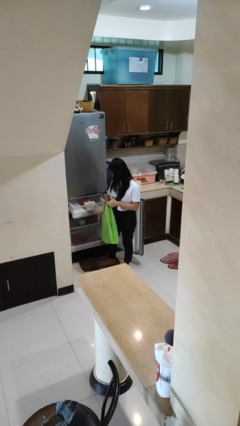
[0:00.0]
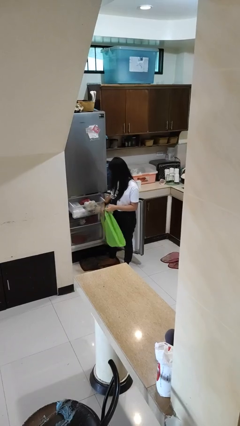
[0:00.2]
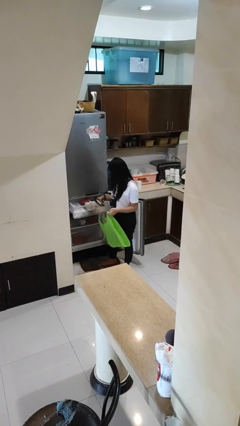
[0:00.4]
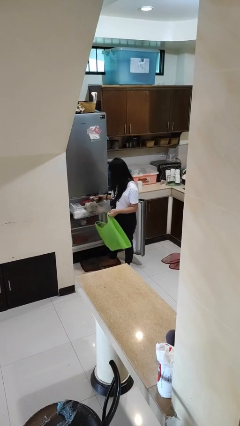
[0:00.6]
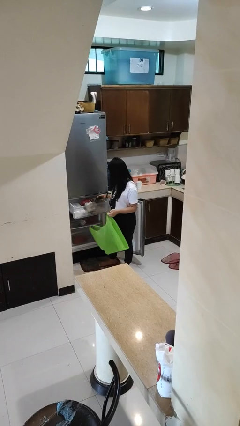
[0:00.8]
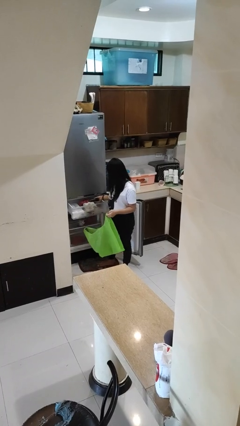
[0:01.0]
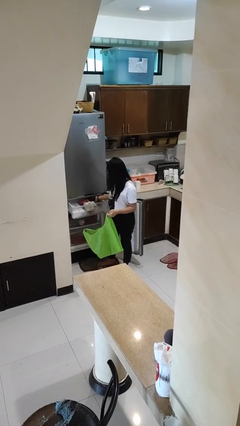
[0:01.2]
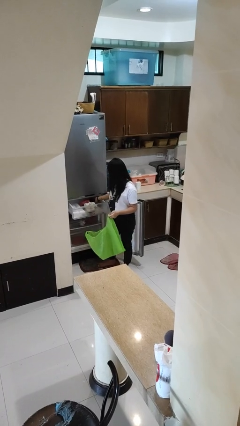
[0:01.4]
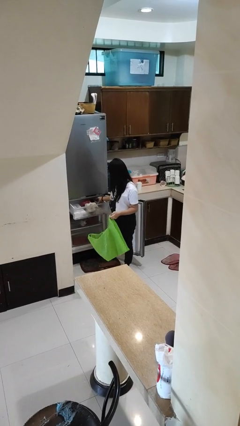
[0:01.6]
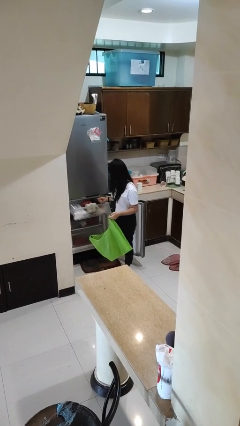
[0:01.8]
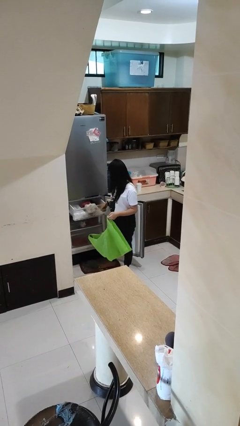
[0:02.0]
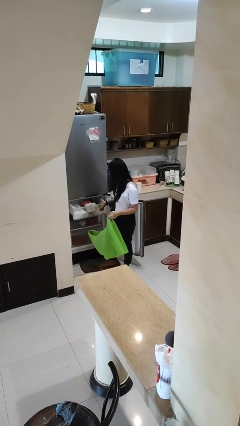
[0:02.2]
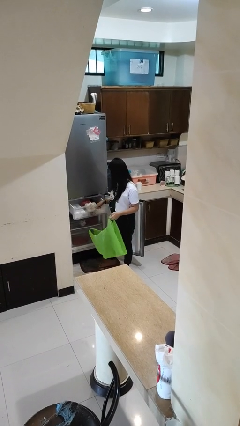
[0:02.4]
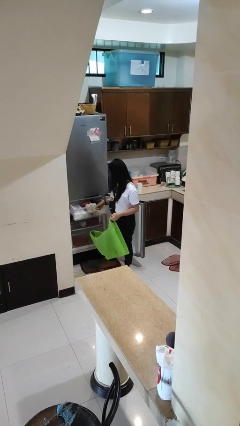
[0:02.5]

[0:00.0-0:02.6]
person loads groceries into refrigerator

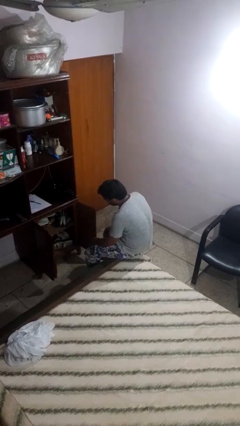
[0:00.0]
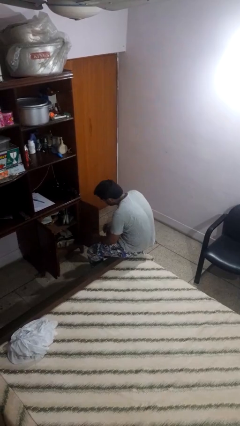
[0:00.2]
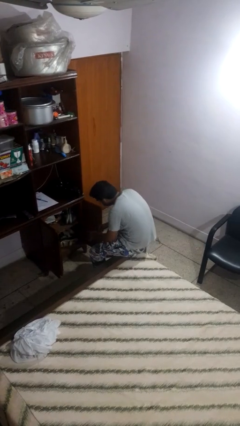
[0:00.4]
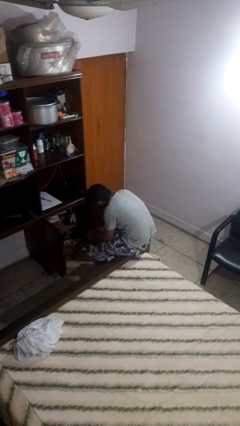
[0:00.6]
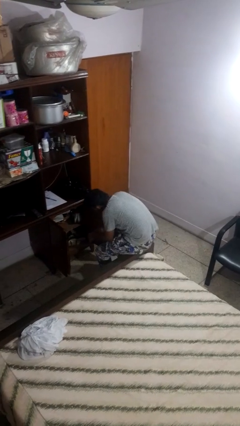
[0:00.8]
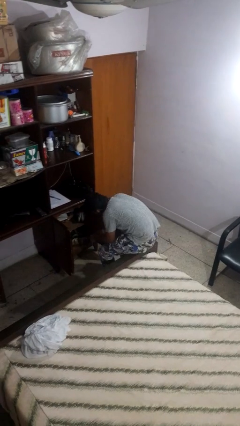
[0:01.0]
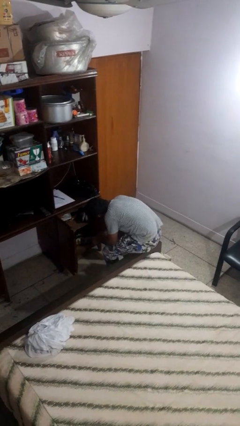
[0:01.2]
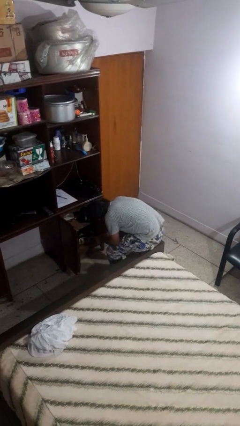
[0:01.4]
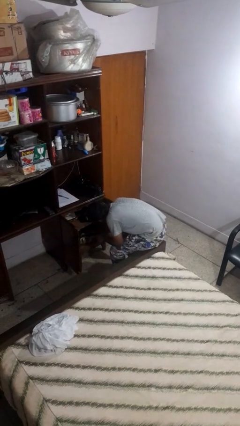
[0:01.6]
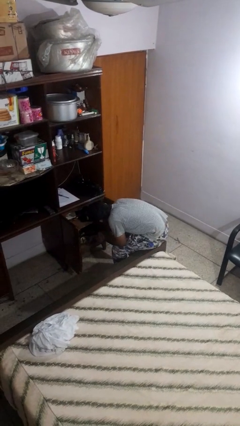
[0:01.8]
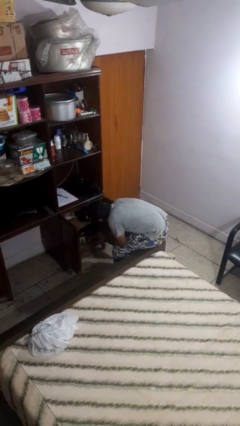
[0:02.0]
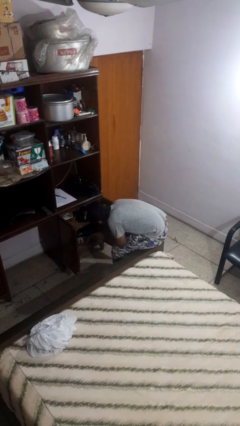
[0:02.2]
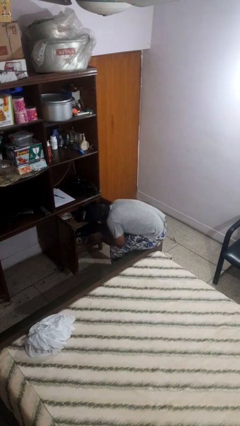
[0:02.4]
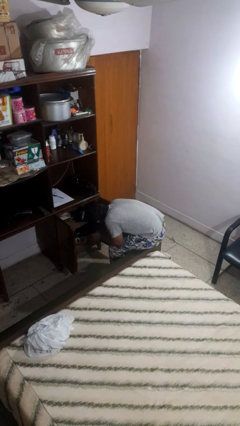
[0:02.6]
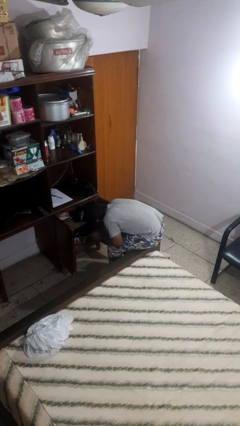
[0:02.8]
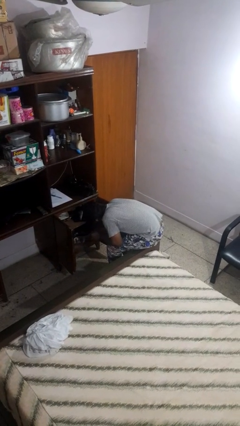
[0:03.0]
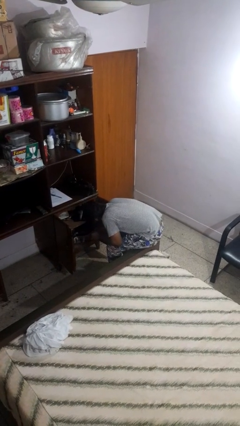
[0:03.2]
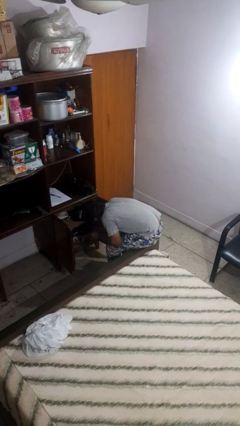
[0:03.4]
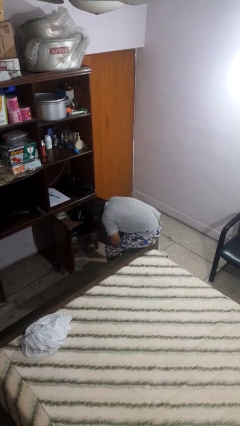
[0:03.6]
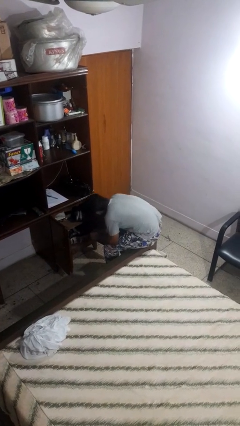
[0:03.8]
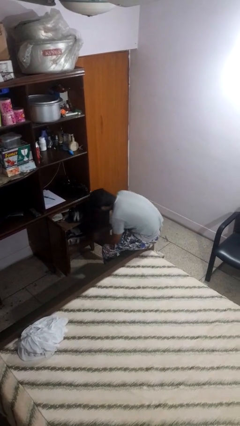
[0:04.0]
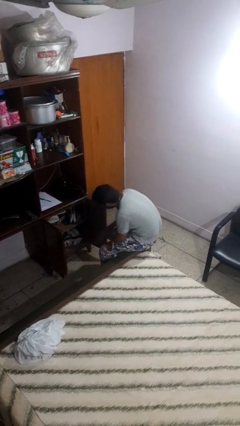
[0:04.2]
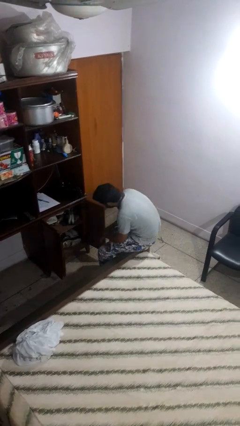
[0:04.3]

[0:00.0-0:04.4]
person searches in cabinet

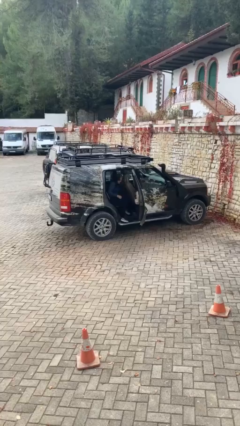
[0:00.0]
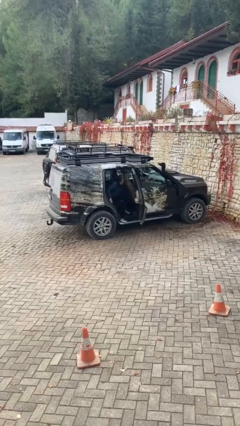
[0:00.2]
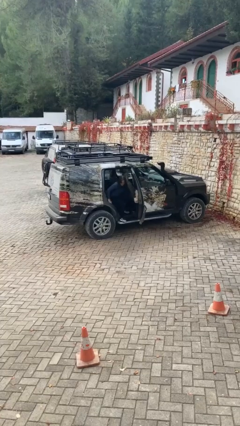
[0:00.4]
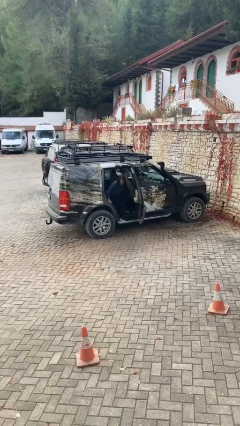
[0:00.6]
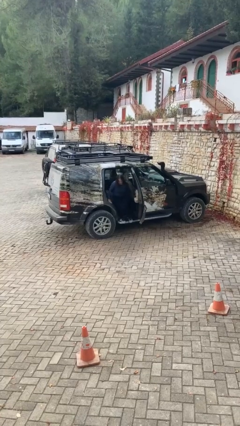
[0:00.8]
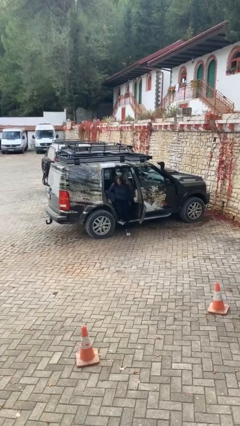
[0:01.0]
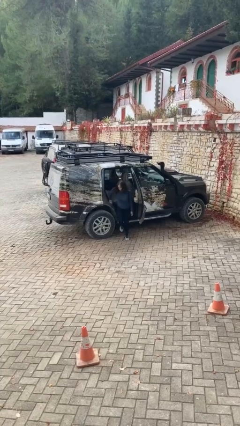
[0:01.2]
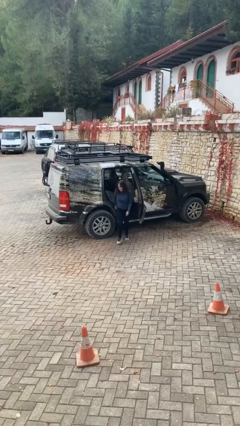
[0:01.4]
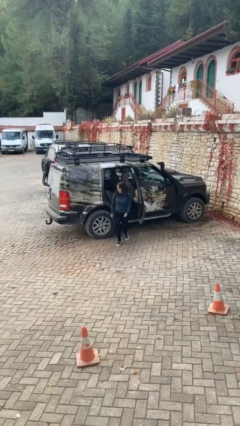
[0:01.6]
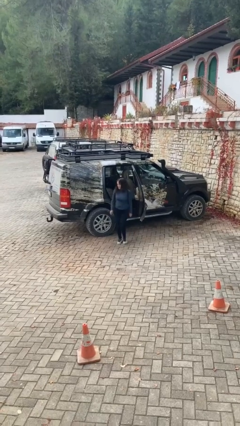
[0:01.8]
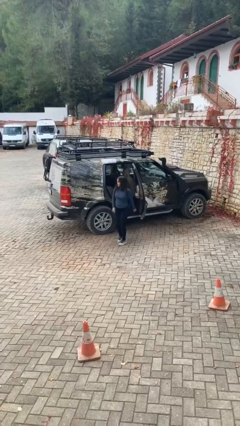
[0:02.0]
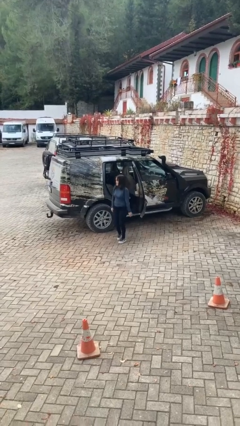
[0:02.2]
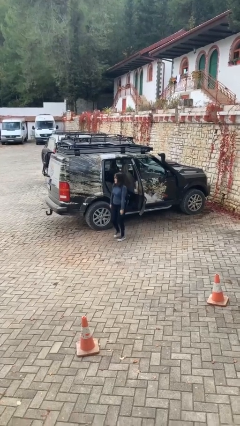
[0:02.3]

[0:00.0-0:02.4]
person exits car

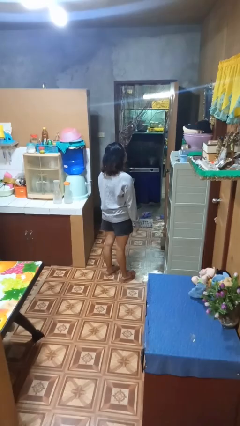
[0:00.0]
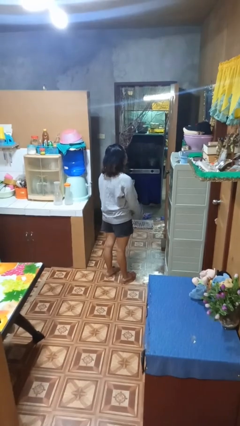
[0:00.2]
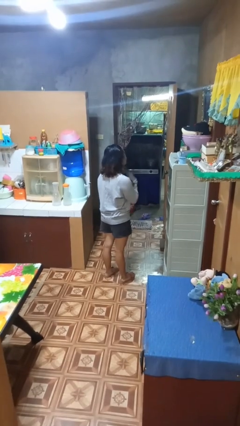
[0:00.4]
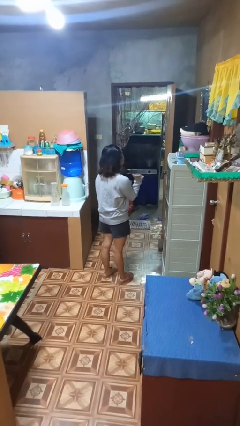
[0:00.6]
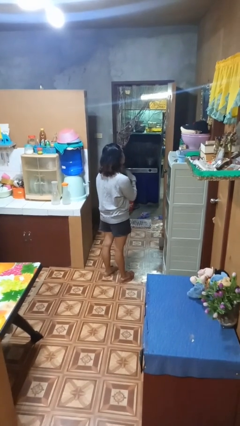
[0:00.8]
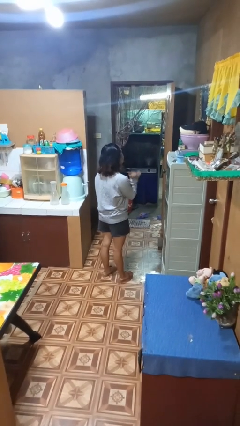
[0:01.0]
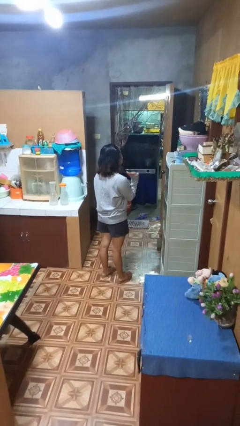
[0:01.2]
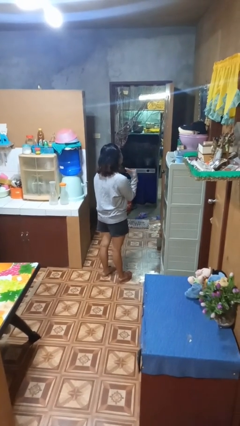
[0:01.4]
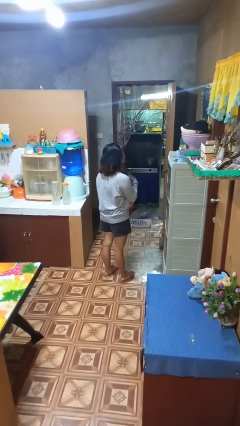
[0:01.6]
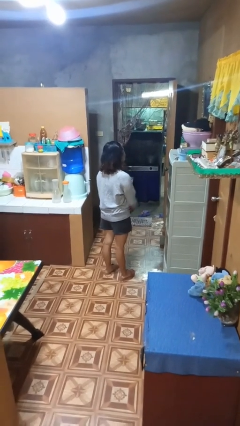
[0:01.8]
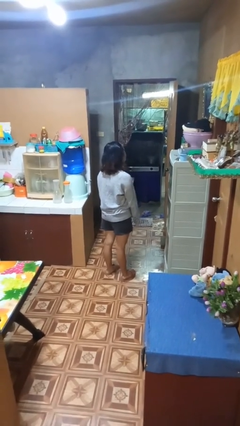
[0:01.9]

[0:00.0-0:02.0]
person gestures cut

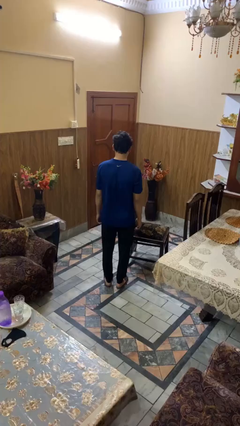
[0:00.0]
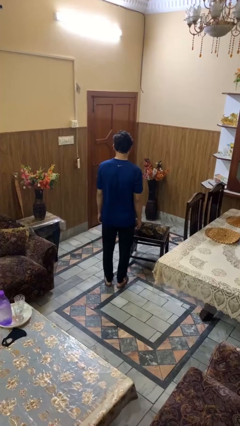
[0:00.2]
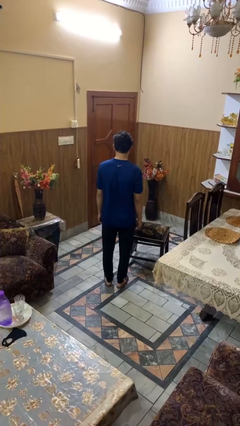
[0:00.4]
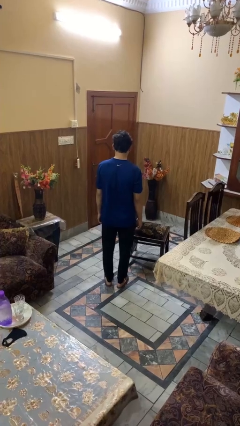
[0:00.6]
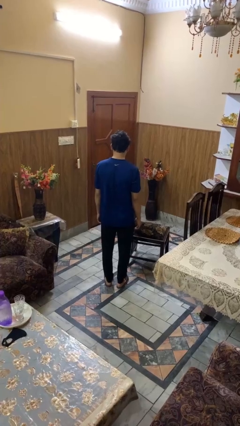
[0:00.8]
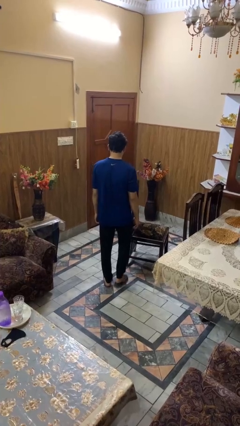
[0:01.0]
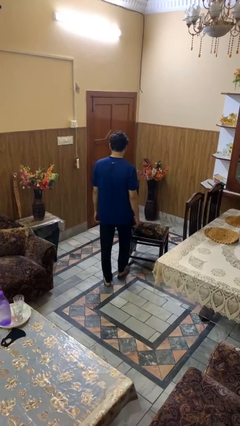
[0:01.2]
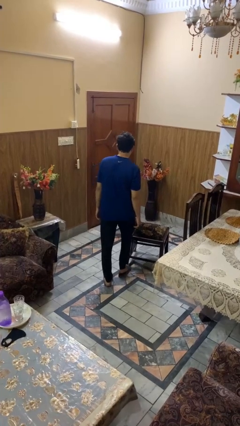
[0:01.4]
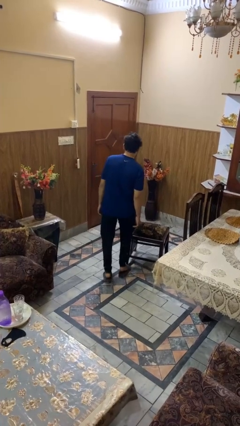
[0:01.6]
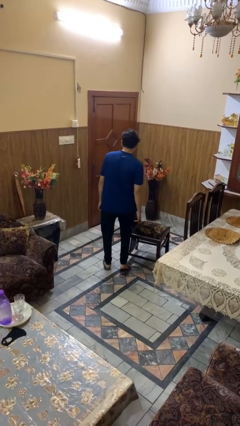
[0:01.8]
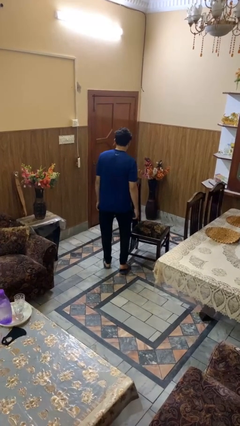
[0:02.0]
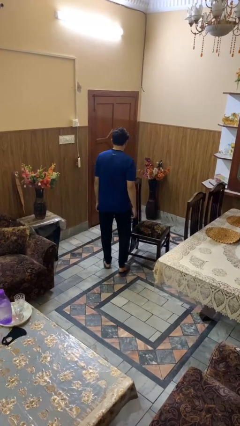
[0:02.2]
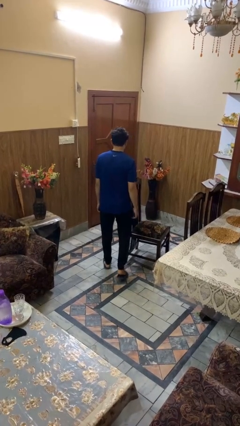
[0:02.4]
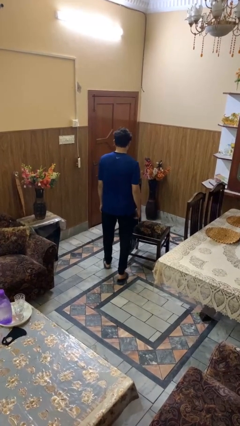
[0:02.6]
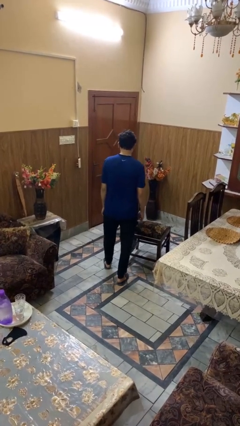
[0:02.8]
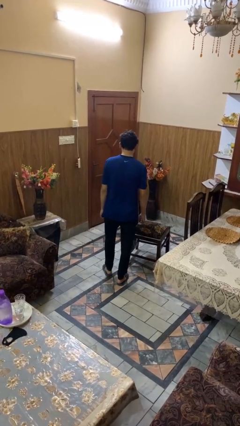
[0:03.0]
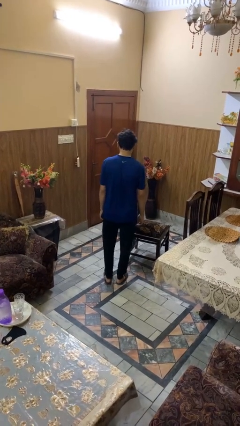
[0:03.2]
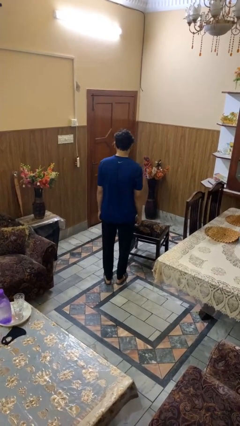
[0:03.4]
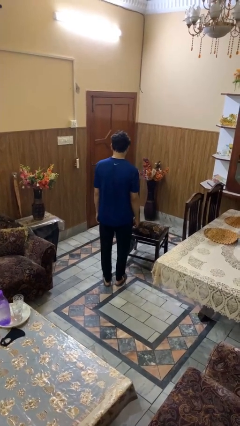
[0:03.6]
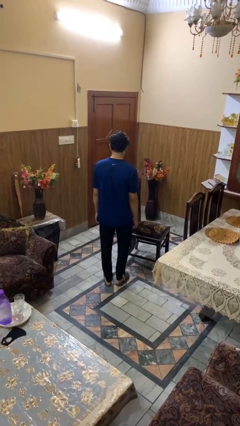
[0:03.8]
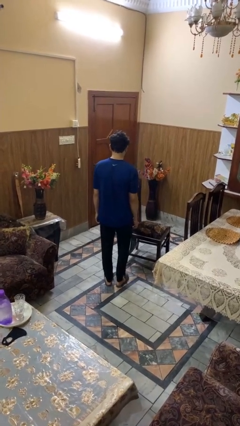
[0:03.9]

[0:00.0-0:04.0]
person stubs toe

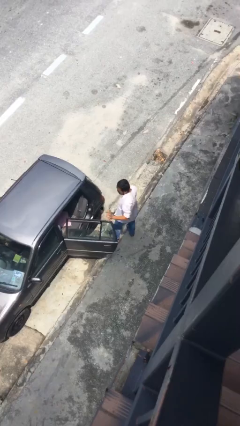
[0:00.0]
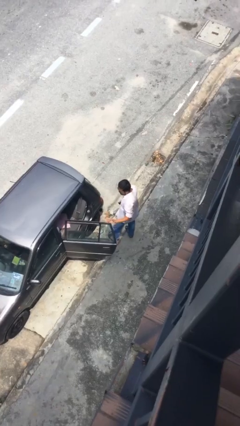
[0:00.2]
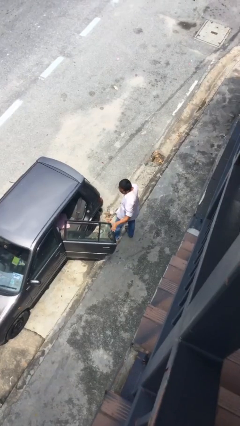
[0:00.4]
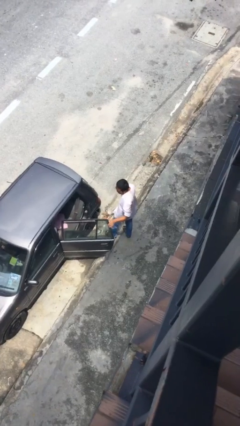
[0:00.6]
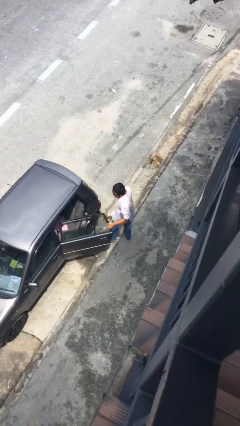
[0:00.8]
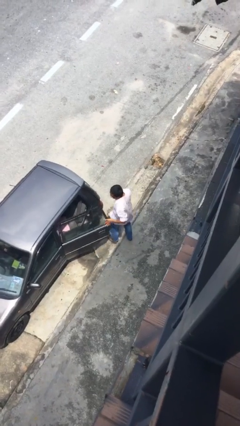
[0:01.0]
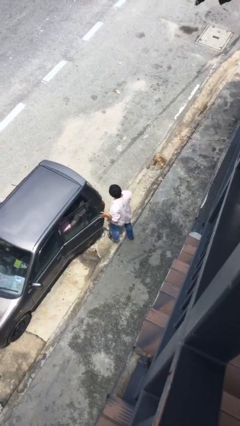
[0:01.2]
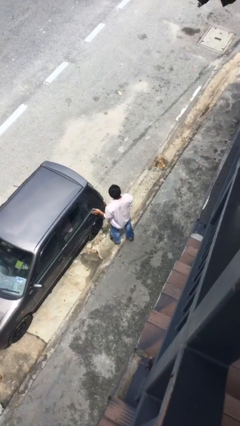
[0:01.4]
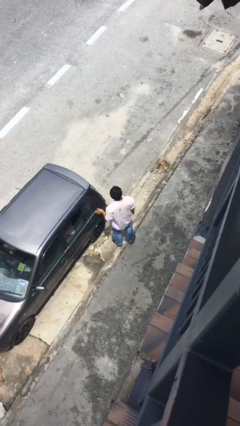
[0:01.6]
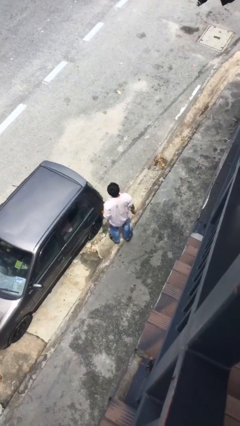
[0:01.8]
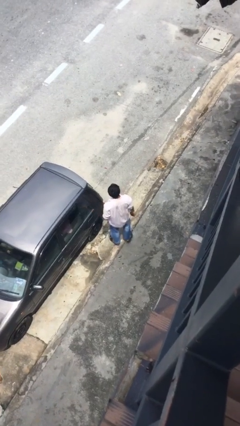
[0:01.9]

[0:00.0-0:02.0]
person closes car door

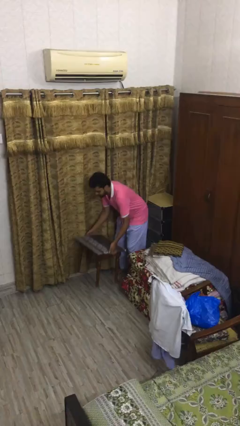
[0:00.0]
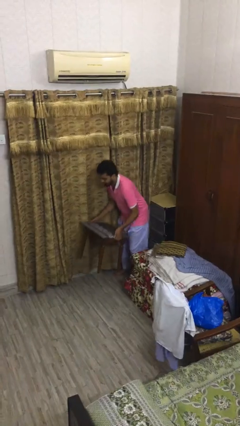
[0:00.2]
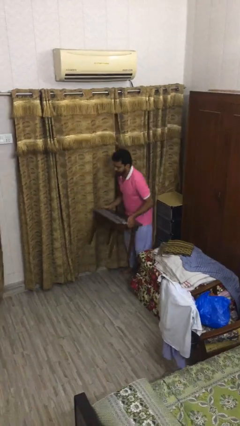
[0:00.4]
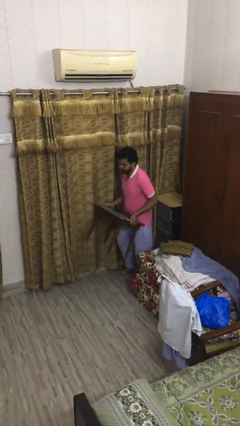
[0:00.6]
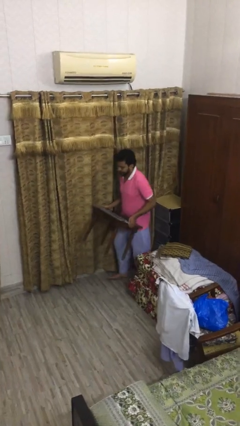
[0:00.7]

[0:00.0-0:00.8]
person picks up object from floor
